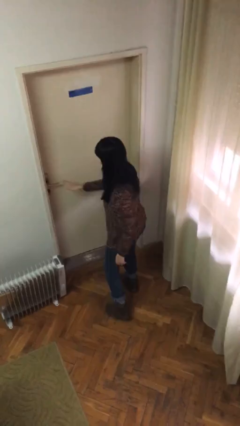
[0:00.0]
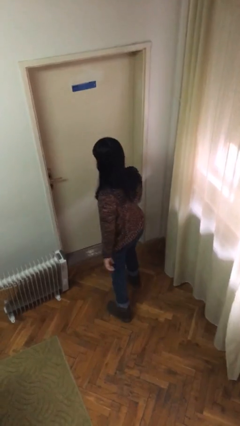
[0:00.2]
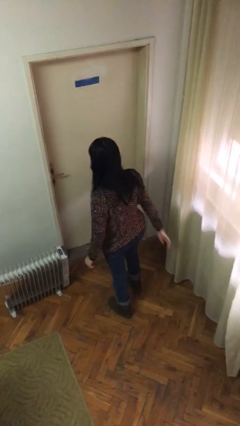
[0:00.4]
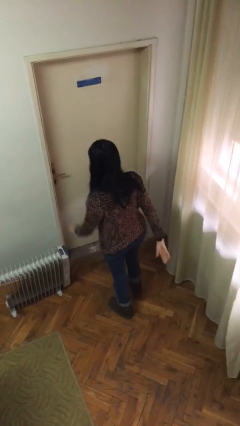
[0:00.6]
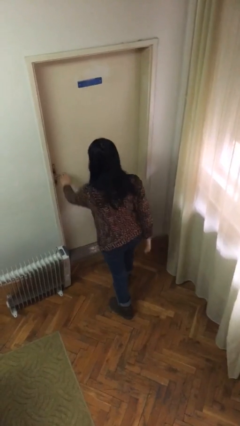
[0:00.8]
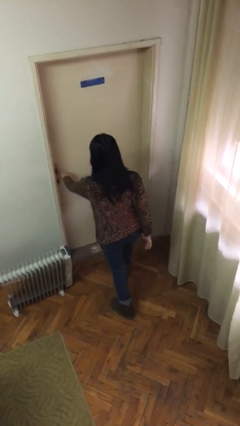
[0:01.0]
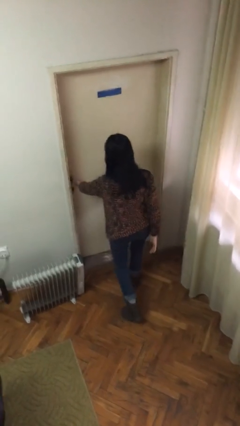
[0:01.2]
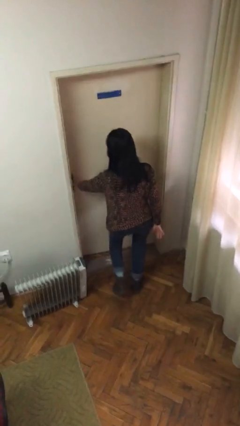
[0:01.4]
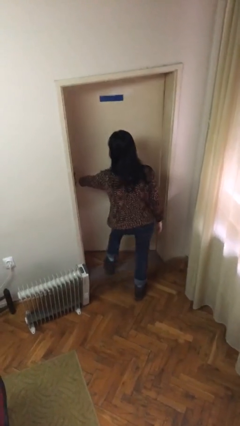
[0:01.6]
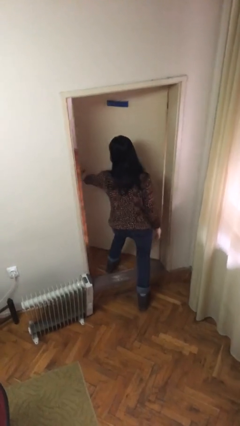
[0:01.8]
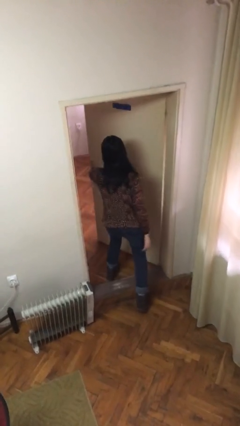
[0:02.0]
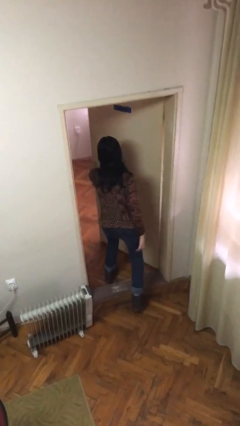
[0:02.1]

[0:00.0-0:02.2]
person opens facility door

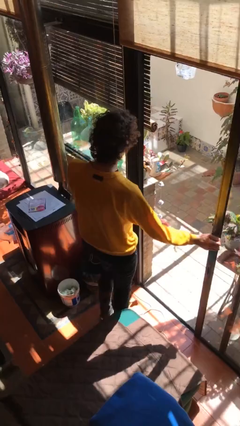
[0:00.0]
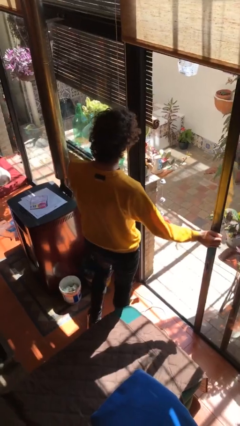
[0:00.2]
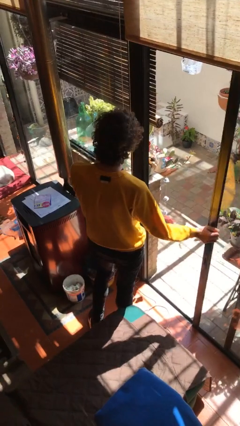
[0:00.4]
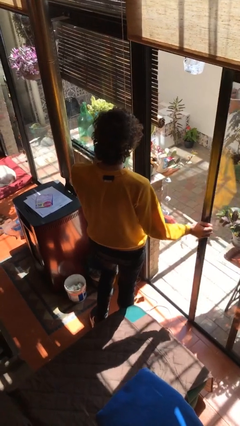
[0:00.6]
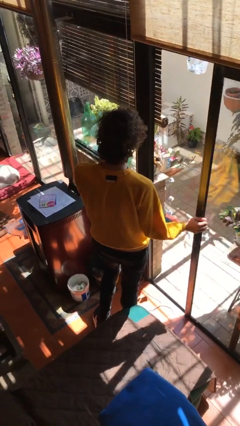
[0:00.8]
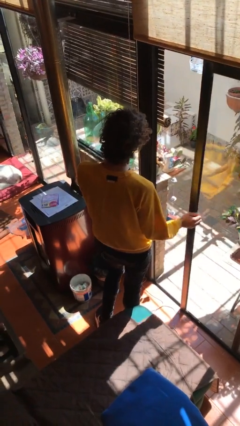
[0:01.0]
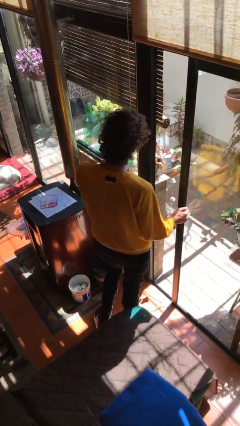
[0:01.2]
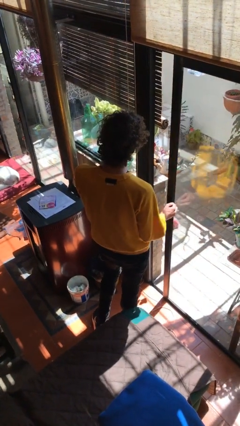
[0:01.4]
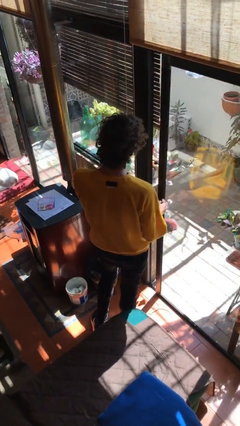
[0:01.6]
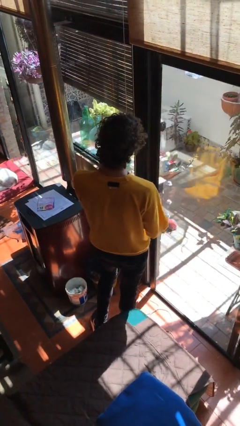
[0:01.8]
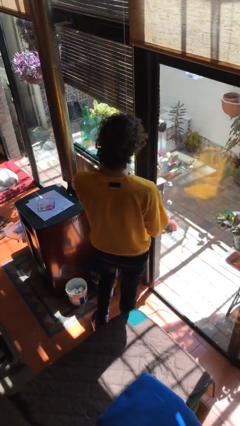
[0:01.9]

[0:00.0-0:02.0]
person closes facility door

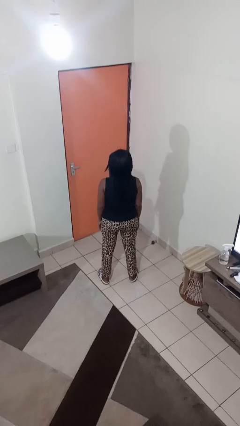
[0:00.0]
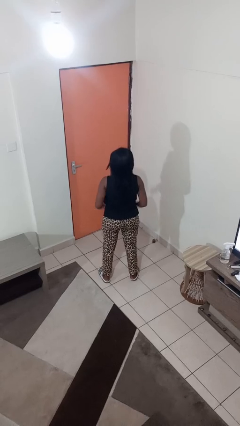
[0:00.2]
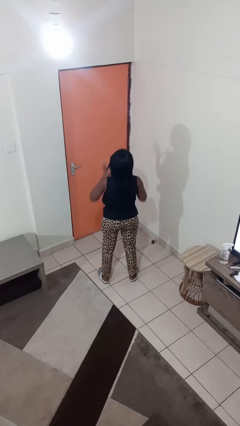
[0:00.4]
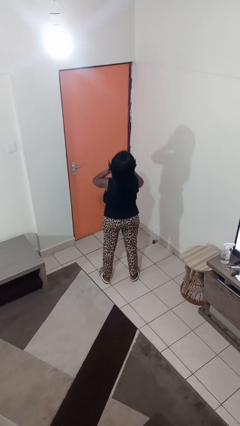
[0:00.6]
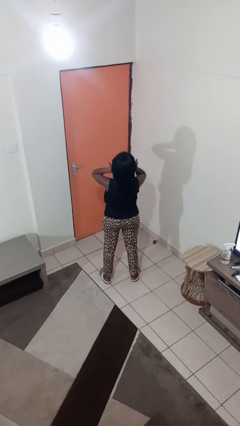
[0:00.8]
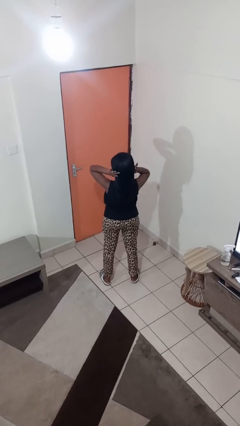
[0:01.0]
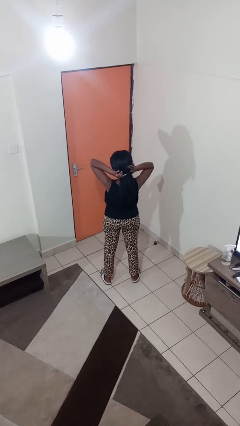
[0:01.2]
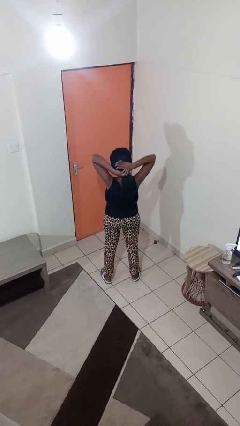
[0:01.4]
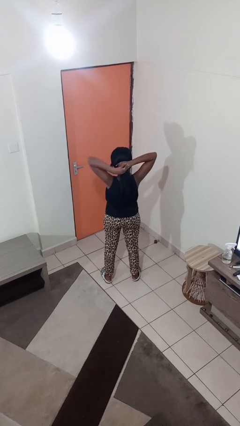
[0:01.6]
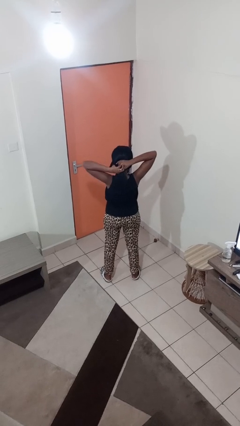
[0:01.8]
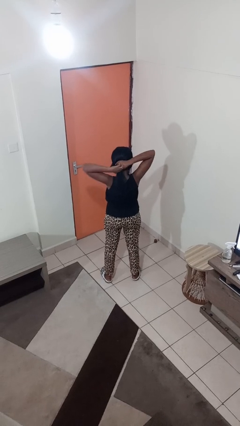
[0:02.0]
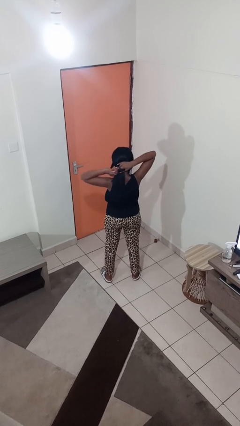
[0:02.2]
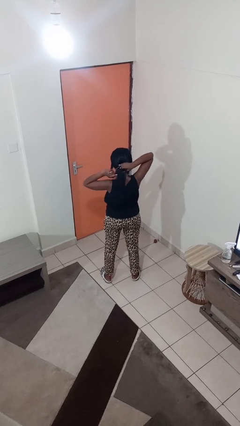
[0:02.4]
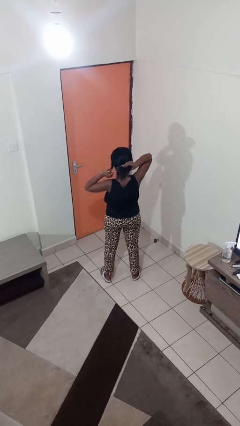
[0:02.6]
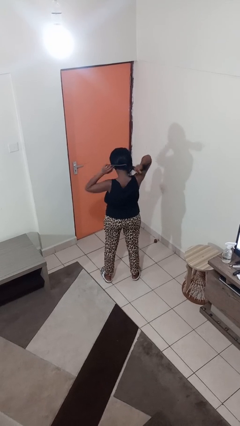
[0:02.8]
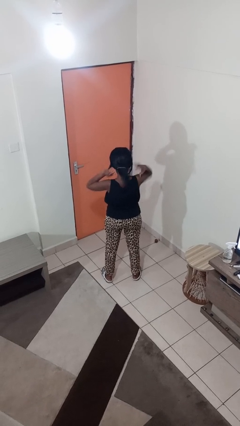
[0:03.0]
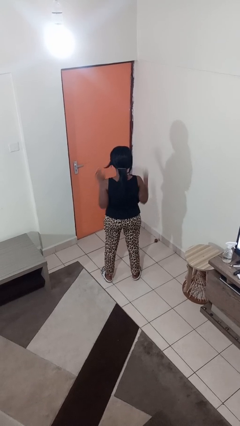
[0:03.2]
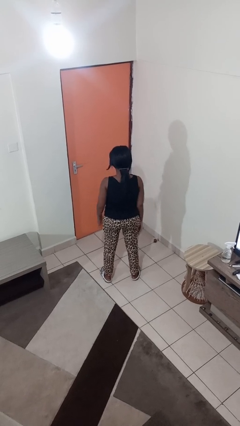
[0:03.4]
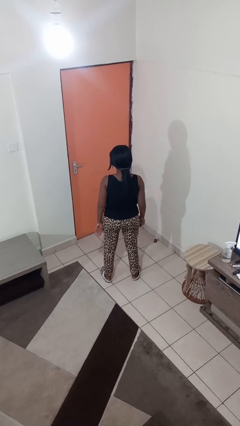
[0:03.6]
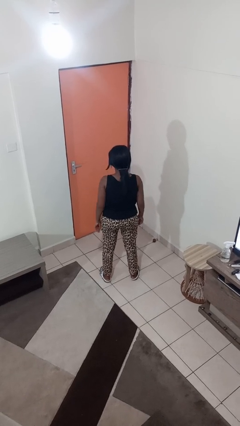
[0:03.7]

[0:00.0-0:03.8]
person puts hair in ponytail

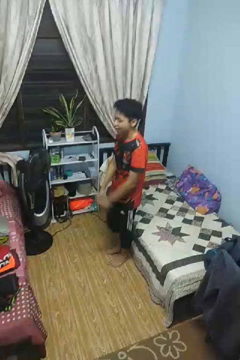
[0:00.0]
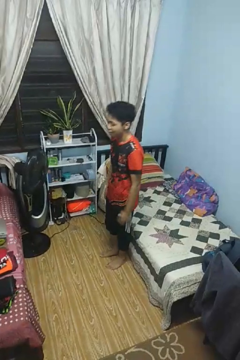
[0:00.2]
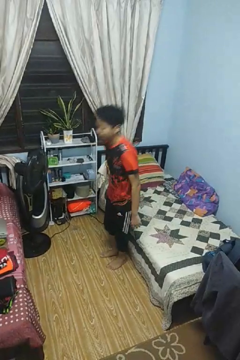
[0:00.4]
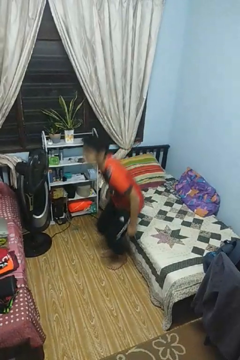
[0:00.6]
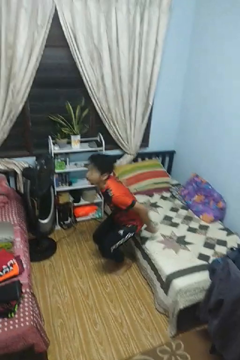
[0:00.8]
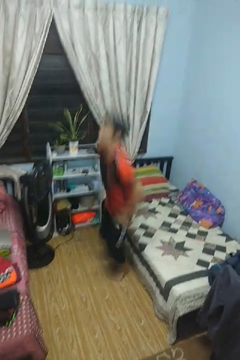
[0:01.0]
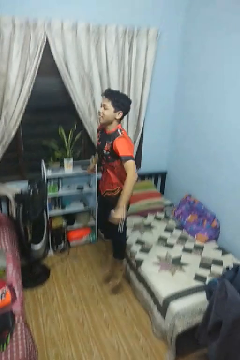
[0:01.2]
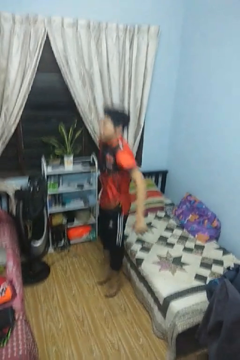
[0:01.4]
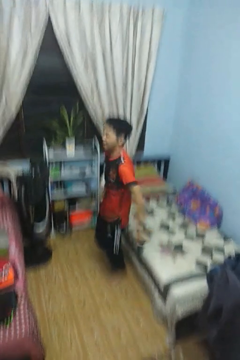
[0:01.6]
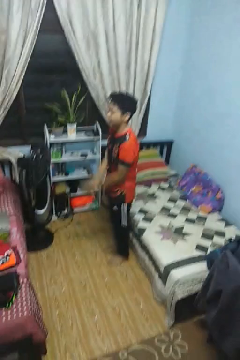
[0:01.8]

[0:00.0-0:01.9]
person jumps

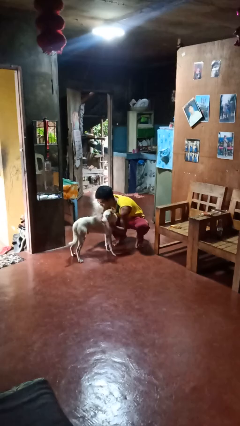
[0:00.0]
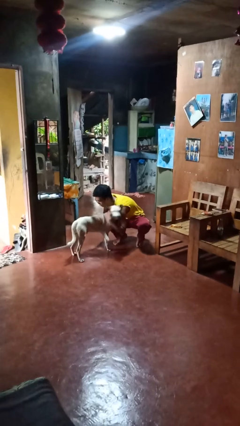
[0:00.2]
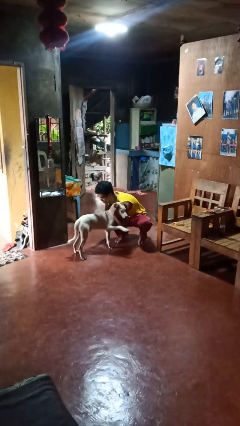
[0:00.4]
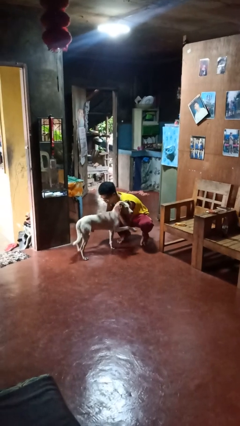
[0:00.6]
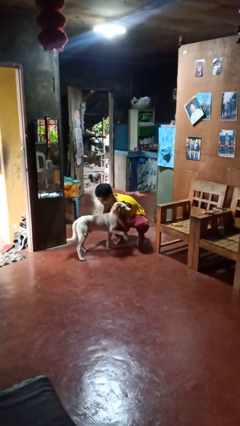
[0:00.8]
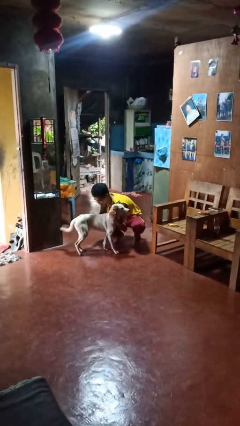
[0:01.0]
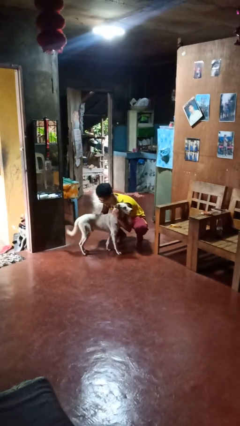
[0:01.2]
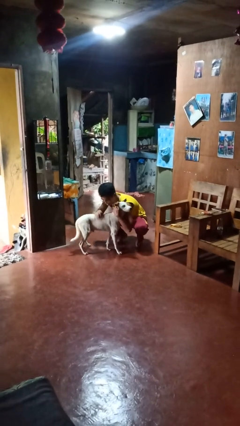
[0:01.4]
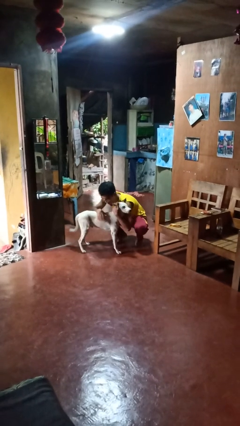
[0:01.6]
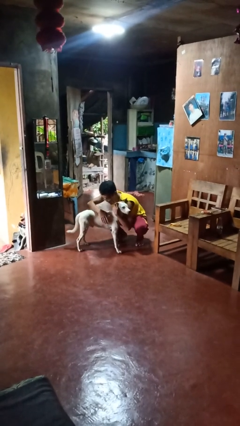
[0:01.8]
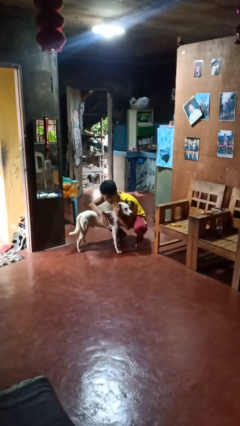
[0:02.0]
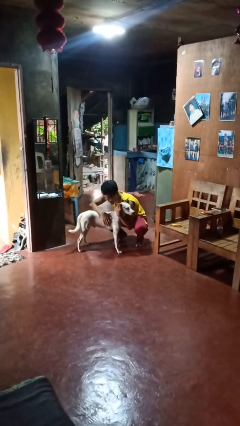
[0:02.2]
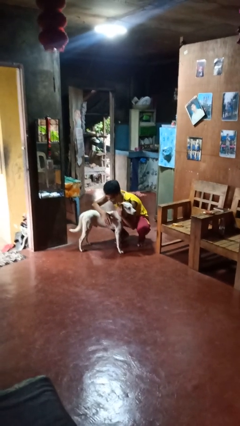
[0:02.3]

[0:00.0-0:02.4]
person hugs dog

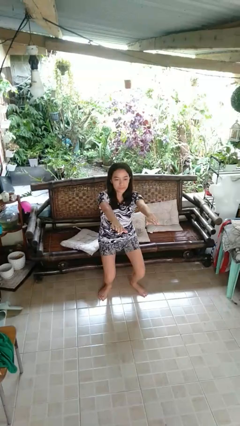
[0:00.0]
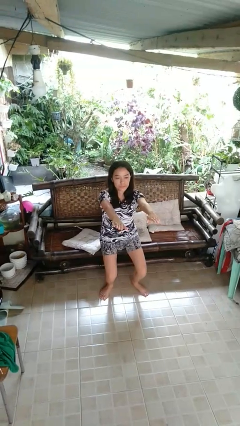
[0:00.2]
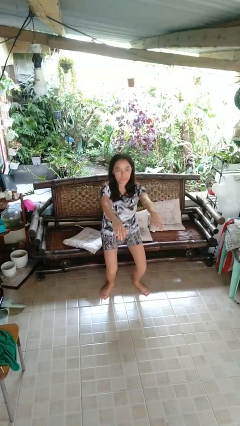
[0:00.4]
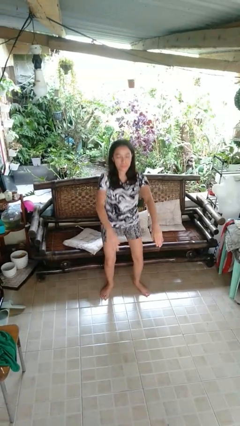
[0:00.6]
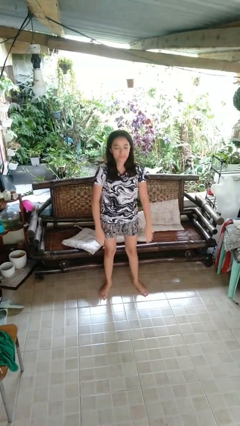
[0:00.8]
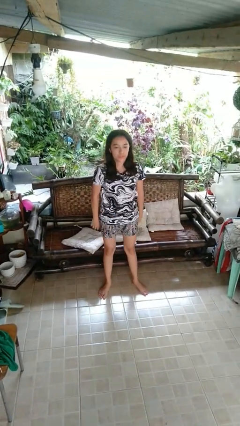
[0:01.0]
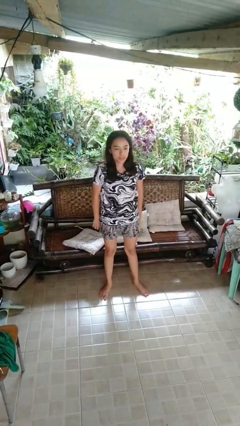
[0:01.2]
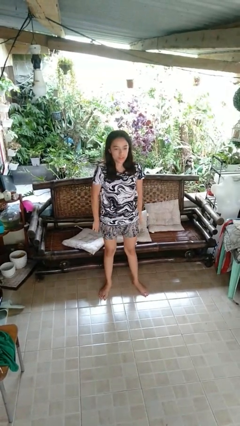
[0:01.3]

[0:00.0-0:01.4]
person stands up

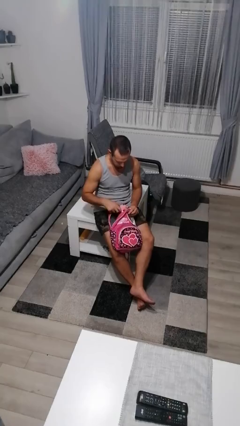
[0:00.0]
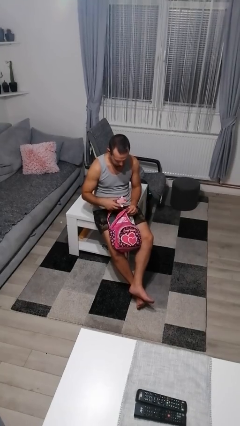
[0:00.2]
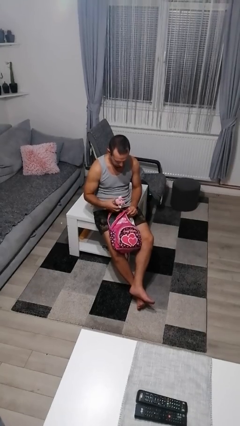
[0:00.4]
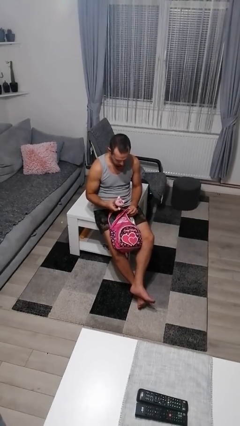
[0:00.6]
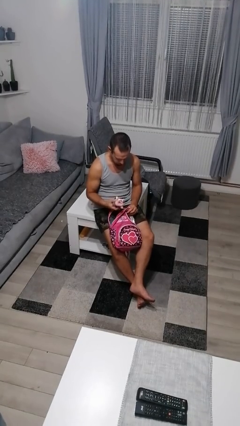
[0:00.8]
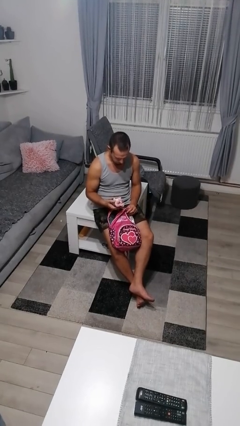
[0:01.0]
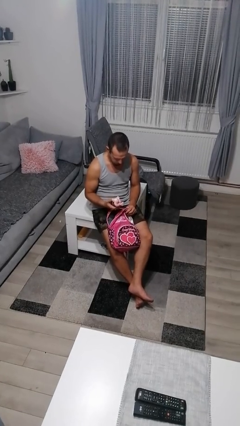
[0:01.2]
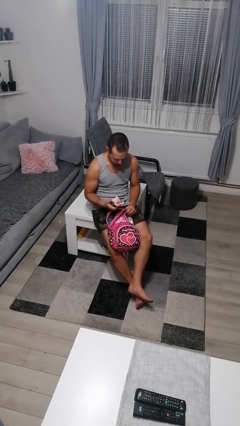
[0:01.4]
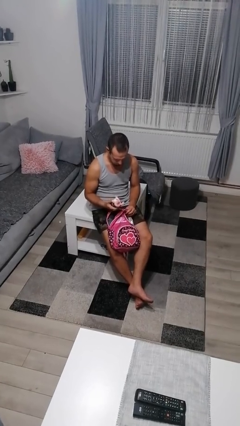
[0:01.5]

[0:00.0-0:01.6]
person takes object from backpack

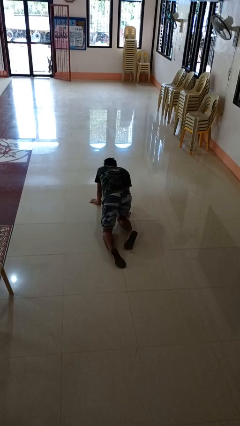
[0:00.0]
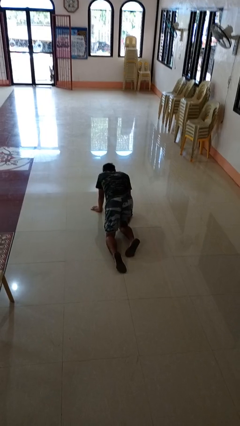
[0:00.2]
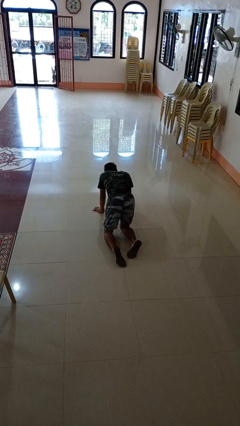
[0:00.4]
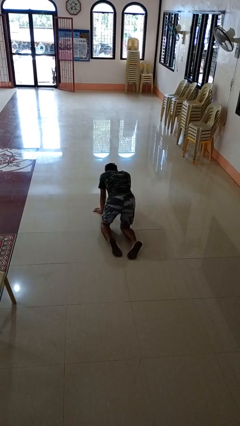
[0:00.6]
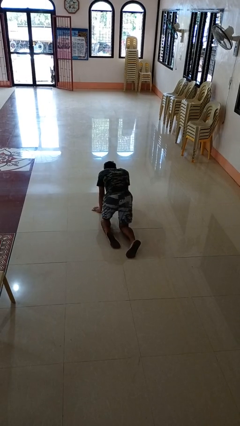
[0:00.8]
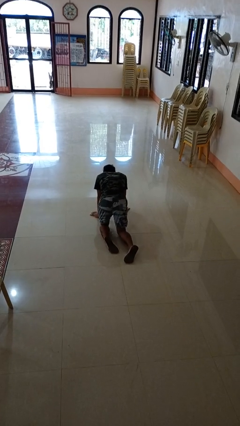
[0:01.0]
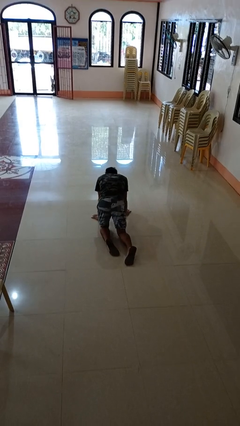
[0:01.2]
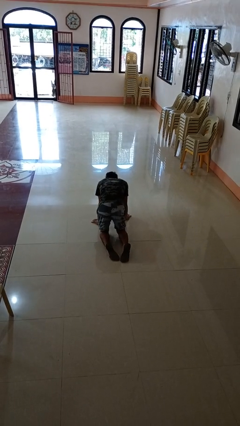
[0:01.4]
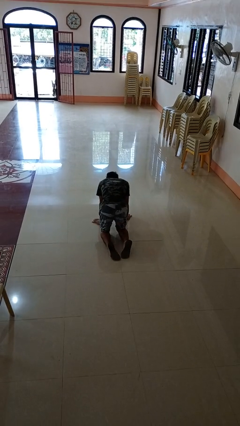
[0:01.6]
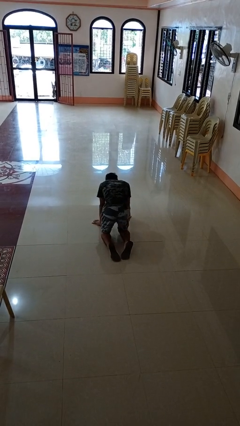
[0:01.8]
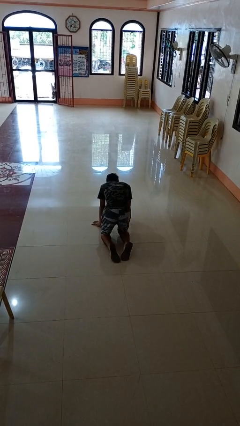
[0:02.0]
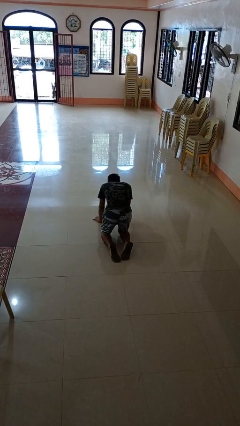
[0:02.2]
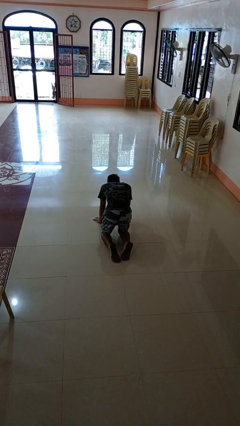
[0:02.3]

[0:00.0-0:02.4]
person crawls
